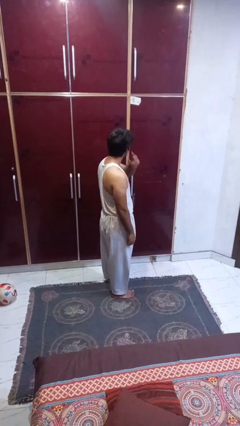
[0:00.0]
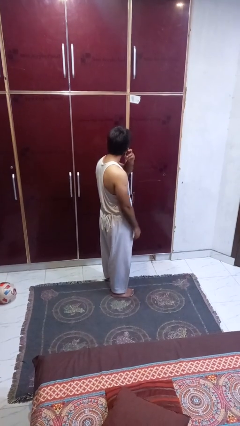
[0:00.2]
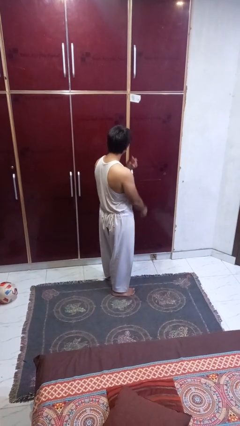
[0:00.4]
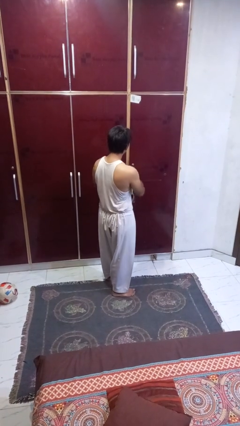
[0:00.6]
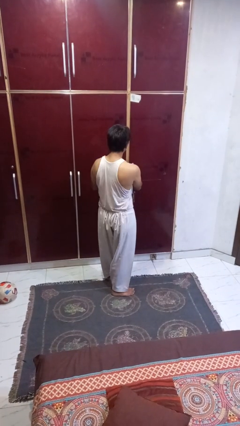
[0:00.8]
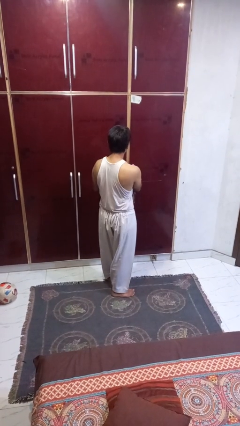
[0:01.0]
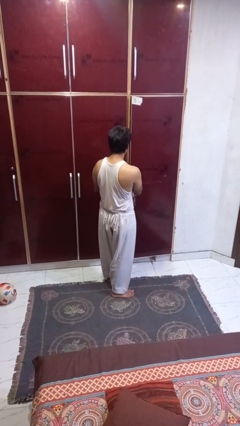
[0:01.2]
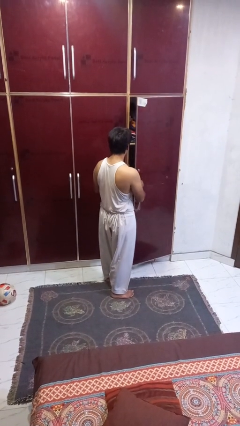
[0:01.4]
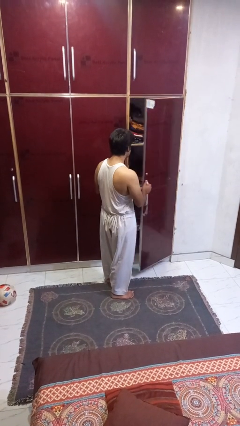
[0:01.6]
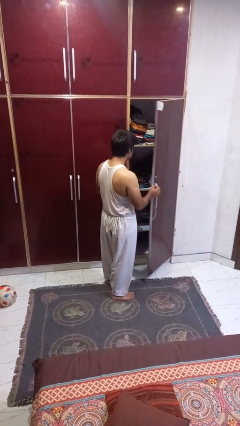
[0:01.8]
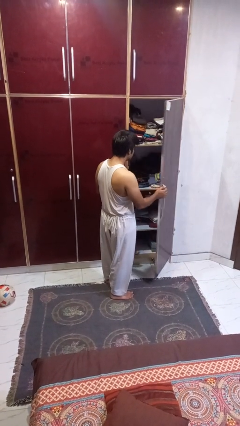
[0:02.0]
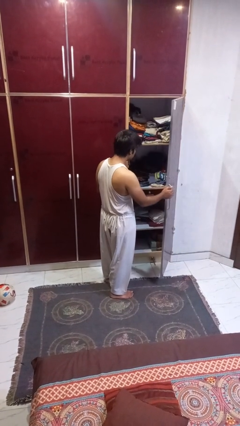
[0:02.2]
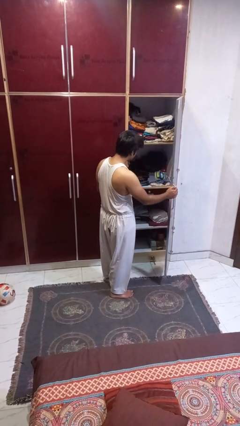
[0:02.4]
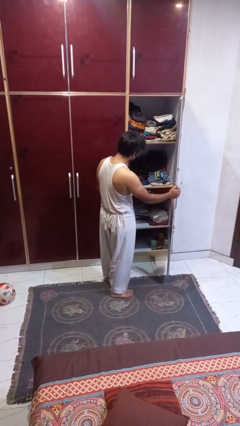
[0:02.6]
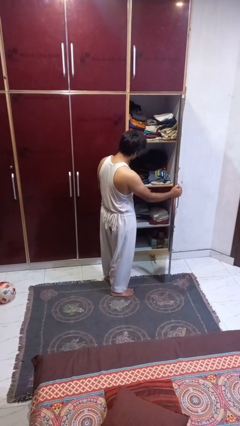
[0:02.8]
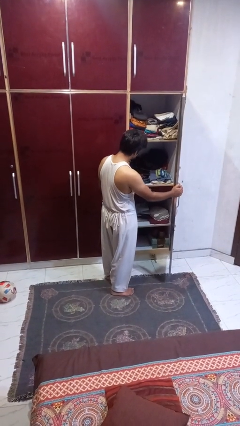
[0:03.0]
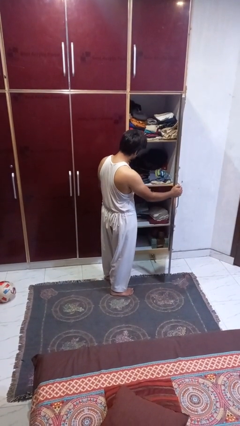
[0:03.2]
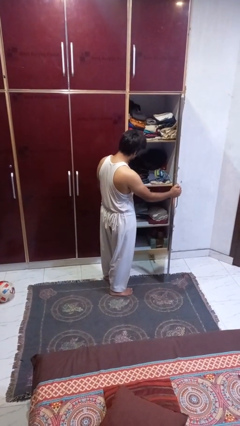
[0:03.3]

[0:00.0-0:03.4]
person opens closet door

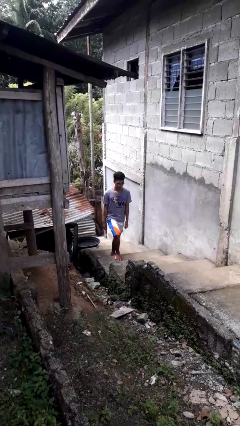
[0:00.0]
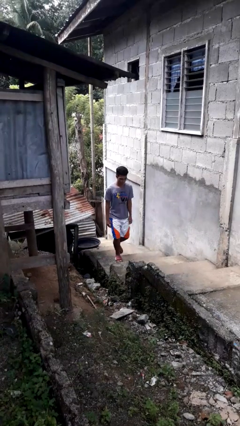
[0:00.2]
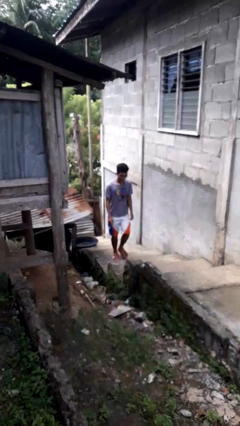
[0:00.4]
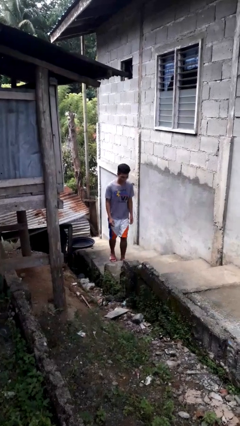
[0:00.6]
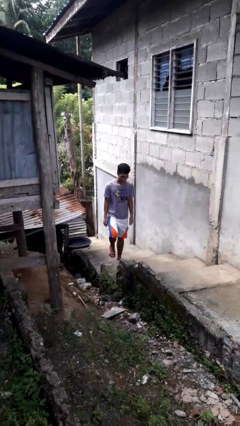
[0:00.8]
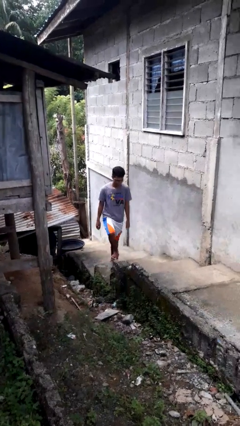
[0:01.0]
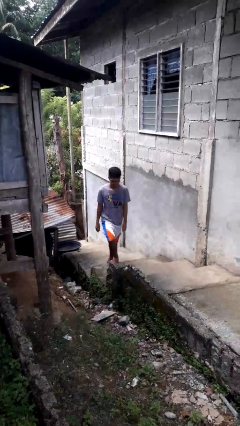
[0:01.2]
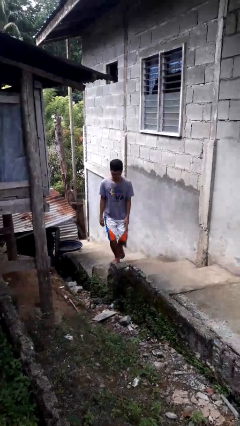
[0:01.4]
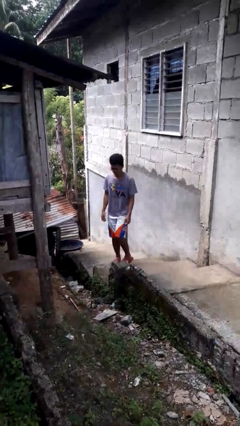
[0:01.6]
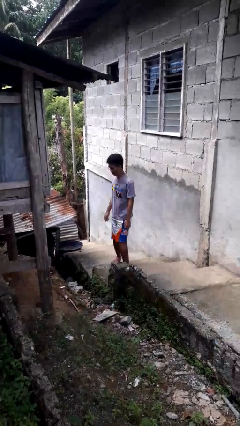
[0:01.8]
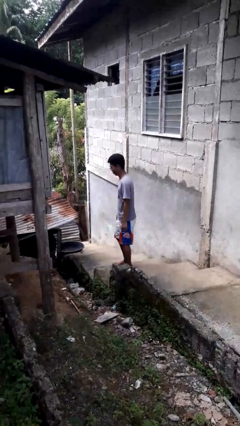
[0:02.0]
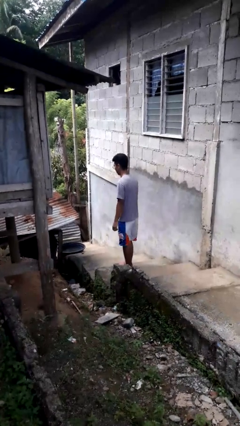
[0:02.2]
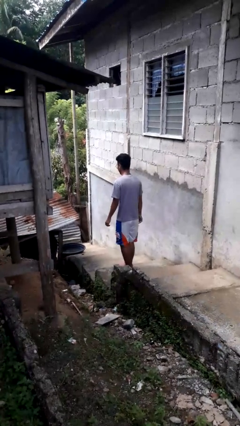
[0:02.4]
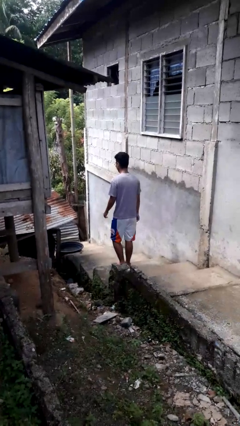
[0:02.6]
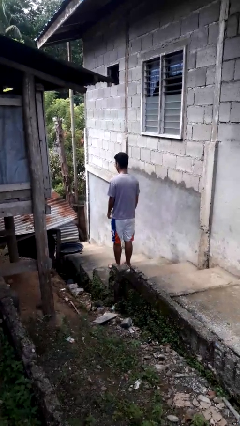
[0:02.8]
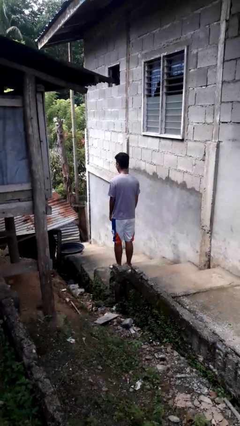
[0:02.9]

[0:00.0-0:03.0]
person climbs up stairs

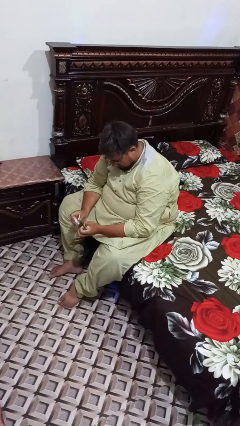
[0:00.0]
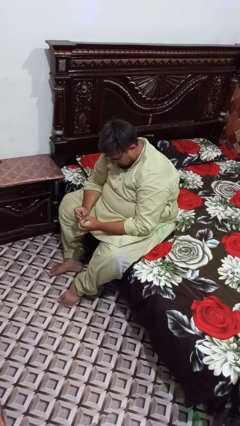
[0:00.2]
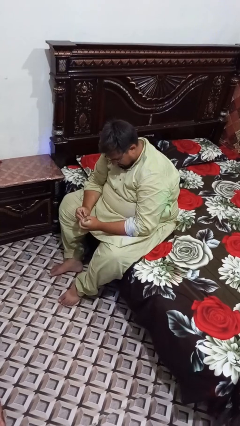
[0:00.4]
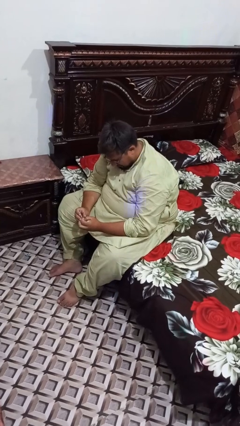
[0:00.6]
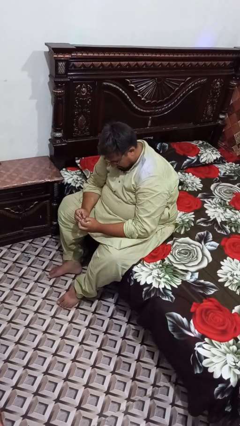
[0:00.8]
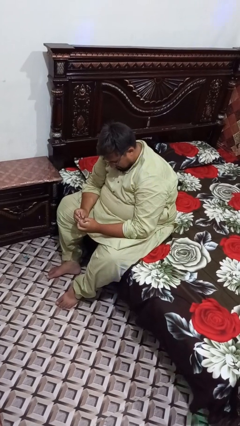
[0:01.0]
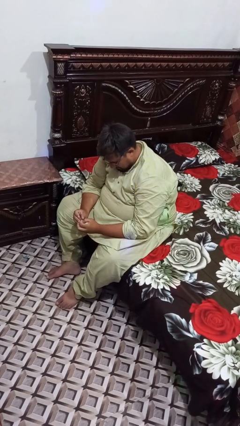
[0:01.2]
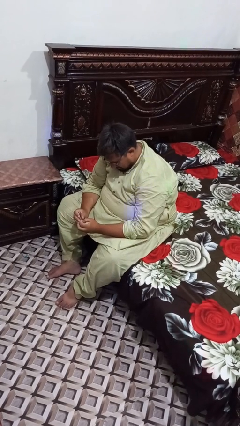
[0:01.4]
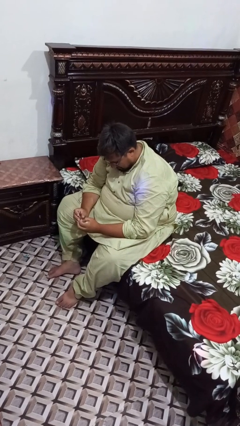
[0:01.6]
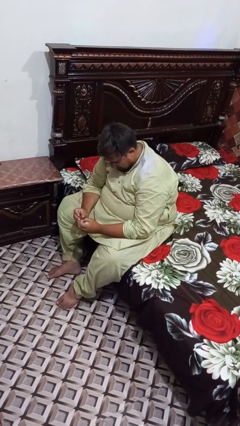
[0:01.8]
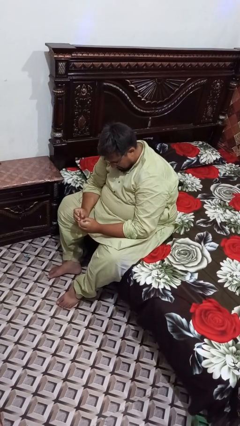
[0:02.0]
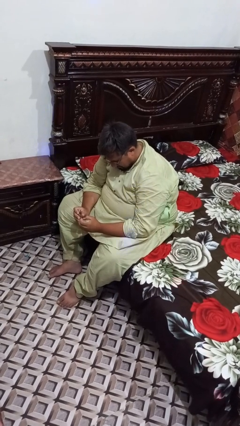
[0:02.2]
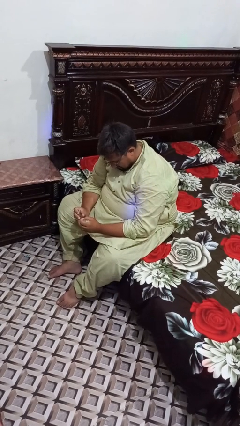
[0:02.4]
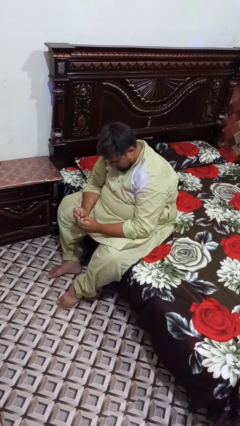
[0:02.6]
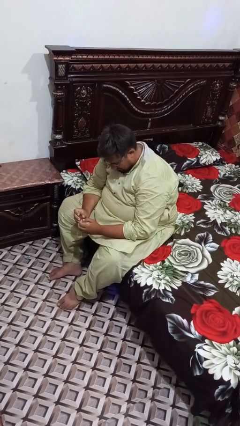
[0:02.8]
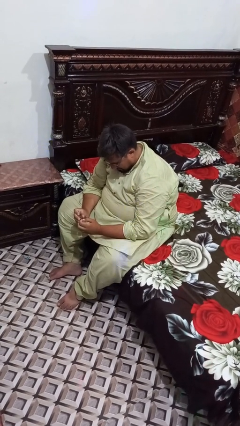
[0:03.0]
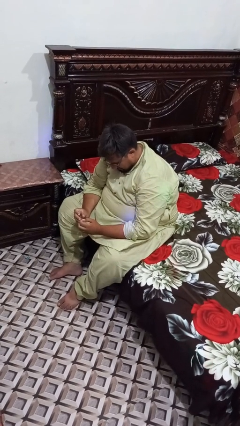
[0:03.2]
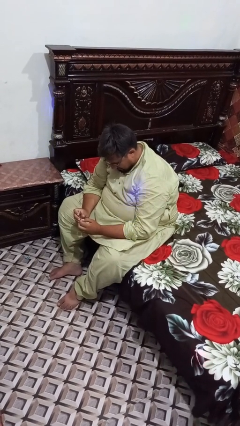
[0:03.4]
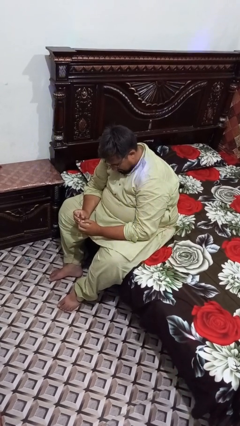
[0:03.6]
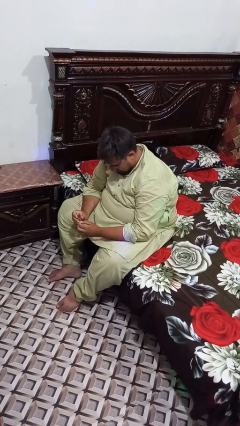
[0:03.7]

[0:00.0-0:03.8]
person files fingernails

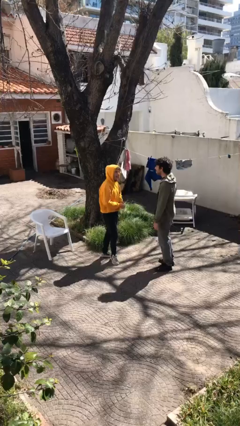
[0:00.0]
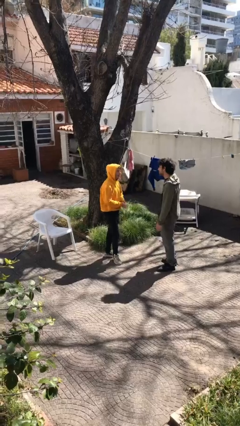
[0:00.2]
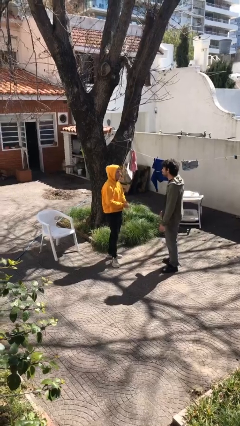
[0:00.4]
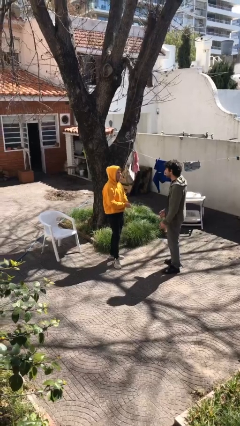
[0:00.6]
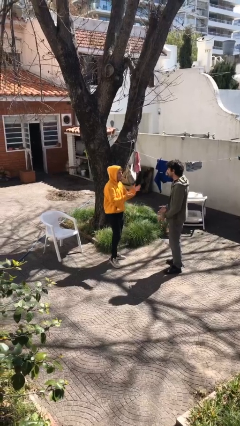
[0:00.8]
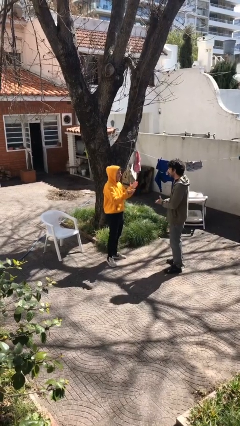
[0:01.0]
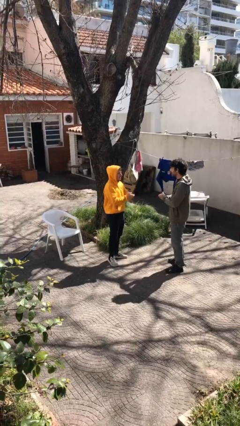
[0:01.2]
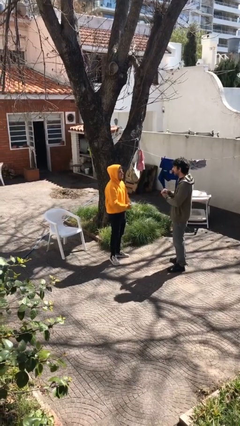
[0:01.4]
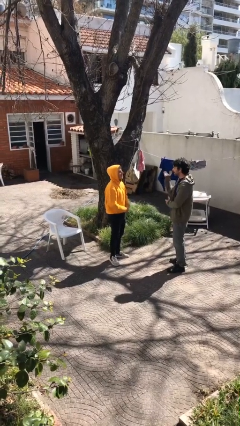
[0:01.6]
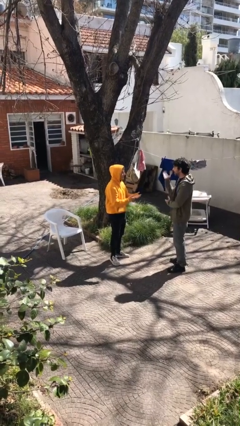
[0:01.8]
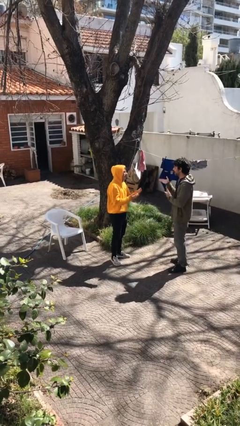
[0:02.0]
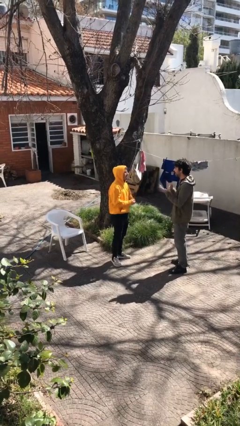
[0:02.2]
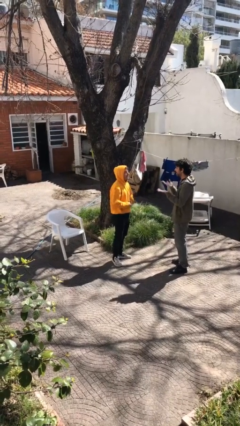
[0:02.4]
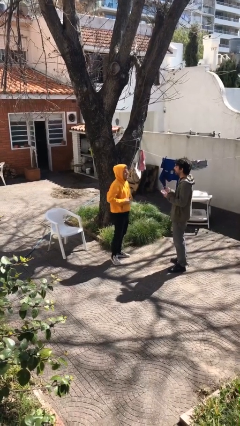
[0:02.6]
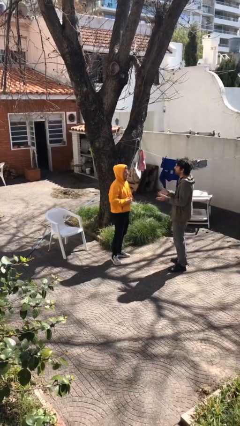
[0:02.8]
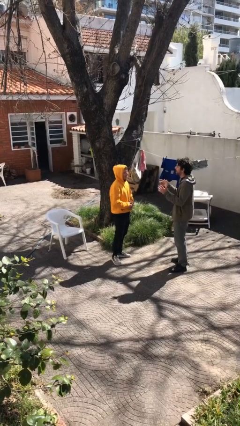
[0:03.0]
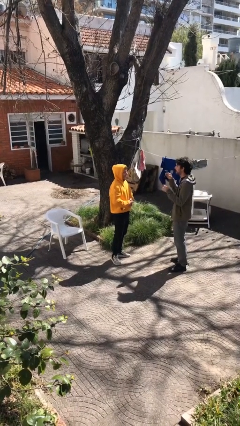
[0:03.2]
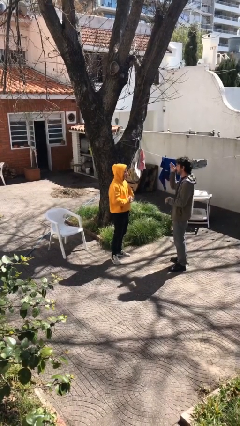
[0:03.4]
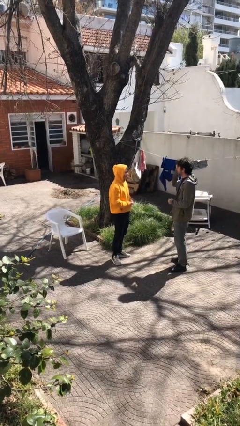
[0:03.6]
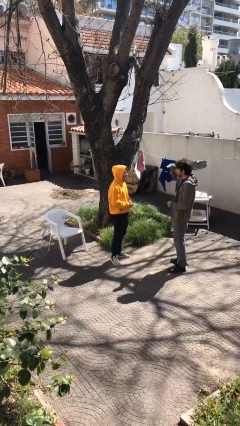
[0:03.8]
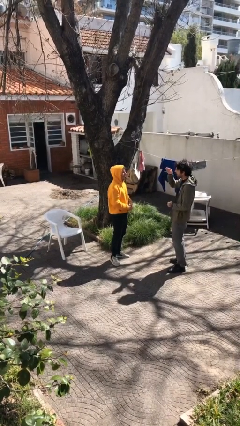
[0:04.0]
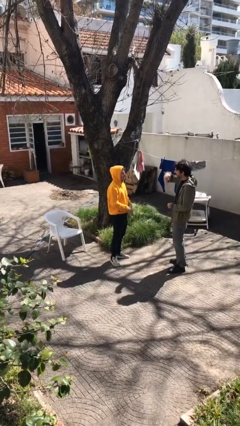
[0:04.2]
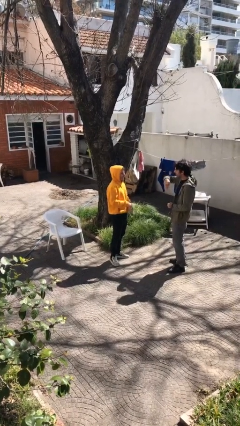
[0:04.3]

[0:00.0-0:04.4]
person talks to person

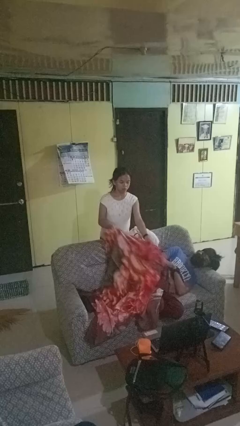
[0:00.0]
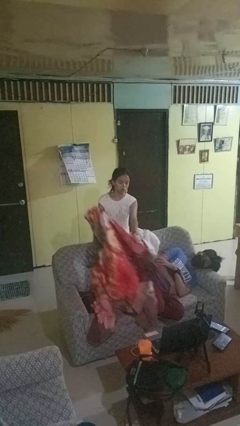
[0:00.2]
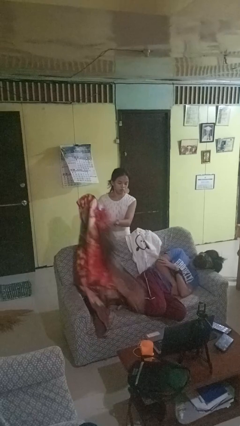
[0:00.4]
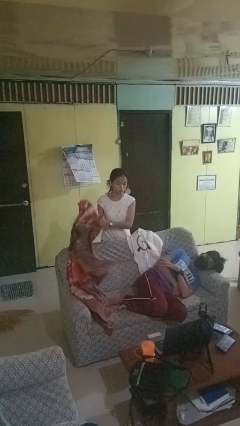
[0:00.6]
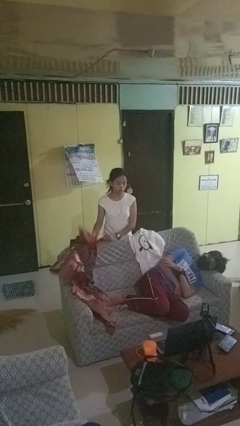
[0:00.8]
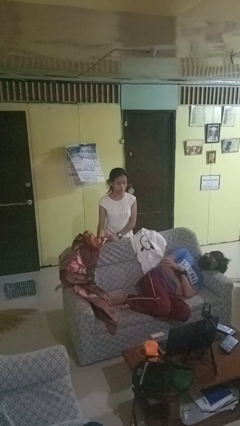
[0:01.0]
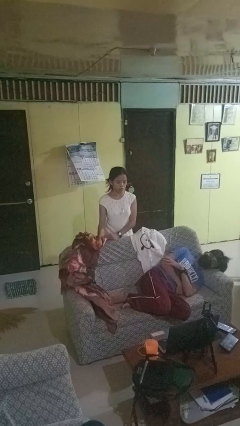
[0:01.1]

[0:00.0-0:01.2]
person uncovers friend with blanket

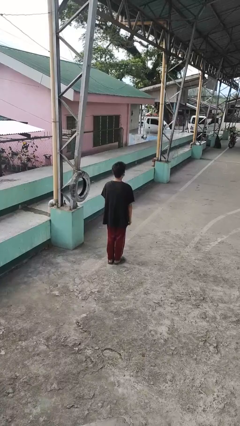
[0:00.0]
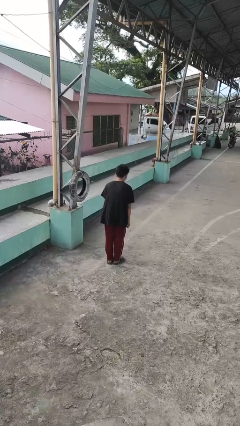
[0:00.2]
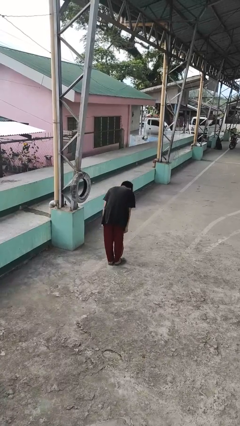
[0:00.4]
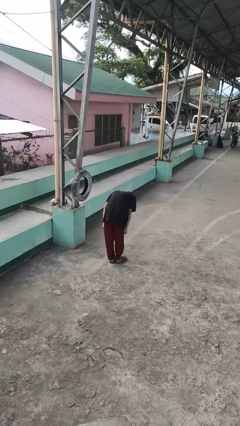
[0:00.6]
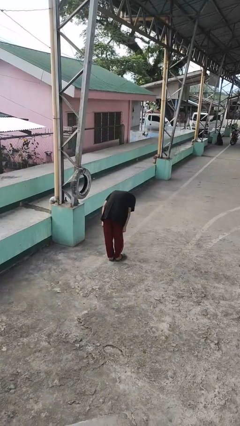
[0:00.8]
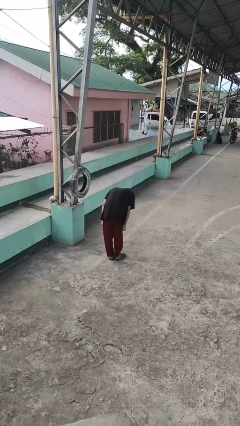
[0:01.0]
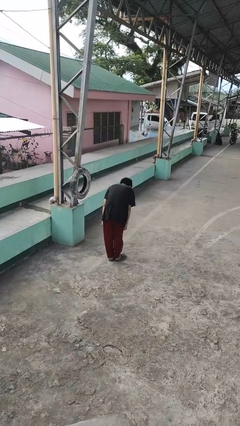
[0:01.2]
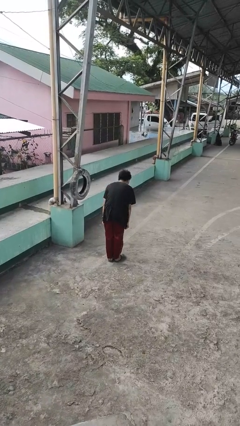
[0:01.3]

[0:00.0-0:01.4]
person bows

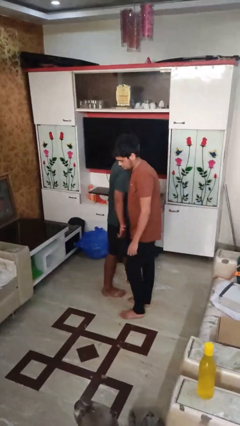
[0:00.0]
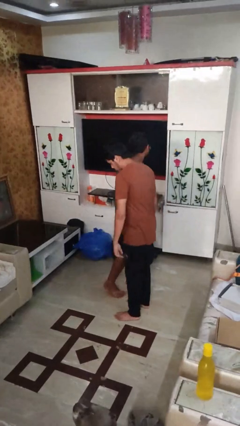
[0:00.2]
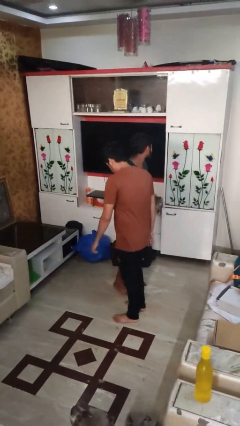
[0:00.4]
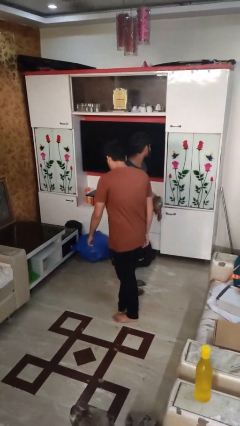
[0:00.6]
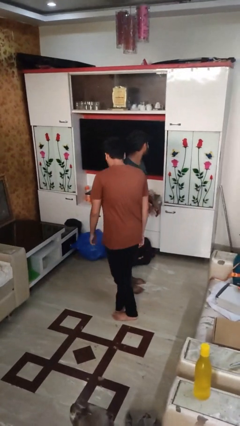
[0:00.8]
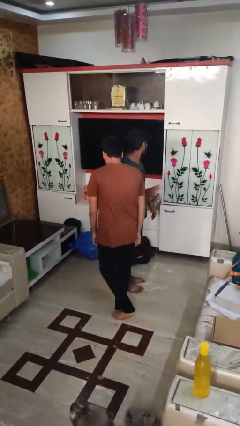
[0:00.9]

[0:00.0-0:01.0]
person bumps into person
